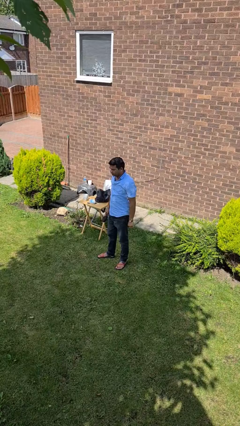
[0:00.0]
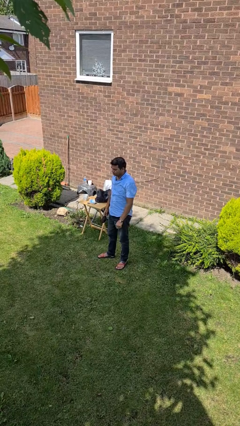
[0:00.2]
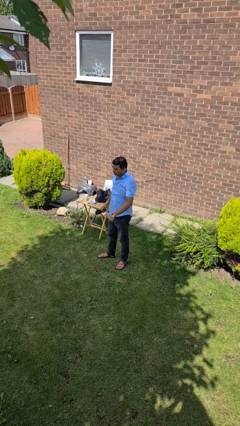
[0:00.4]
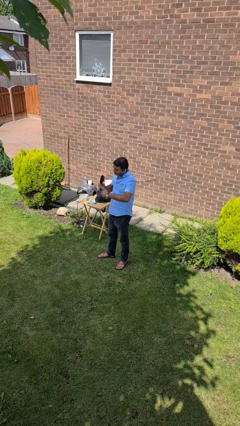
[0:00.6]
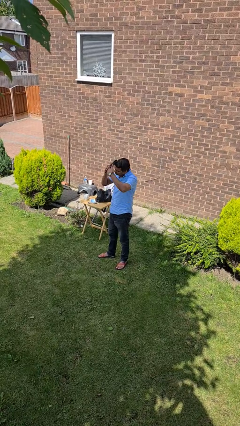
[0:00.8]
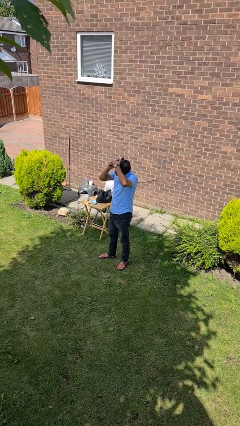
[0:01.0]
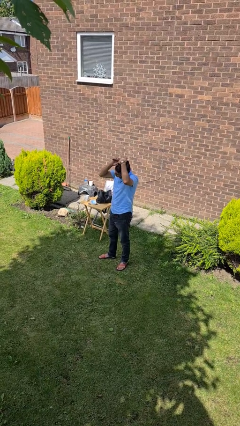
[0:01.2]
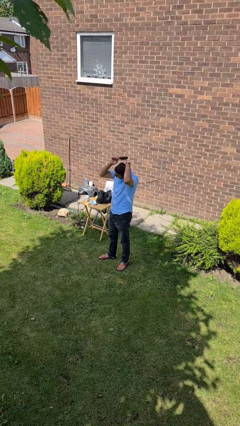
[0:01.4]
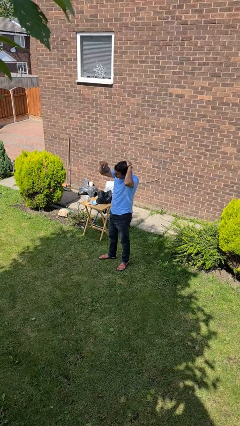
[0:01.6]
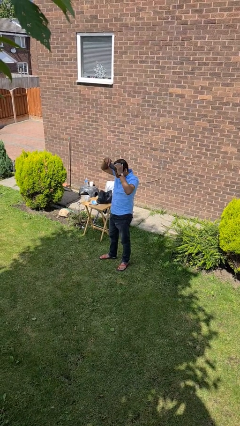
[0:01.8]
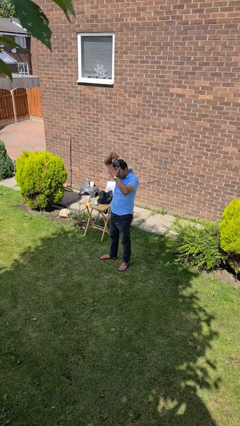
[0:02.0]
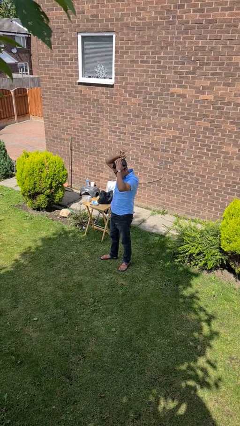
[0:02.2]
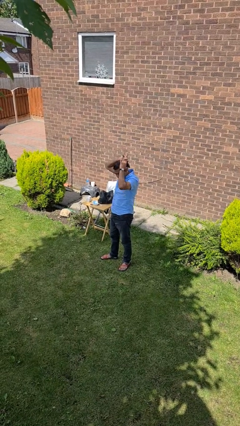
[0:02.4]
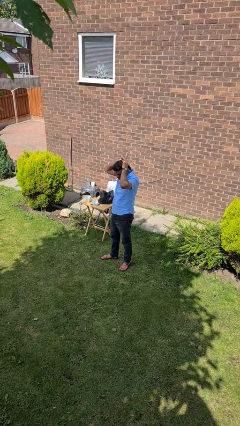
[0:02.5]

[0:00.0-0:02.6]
person brushes hair

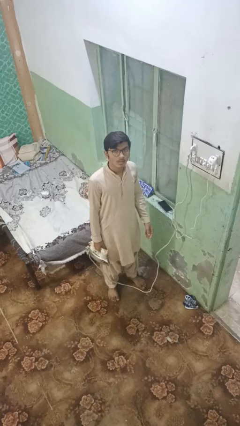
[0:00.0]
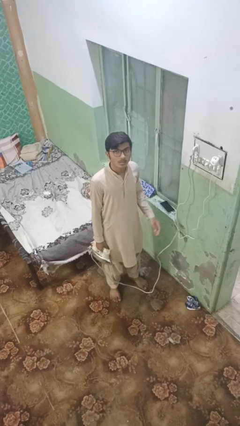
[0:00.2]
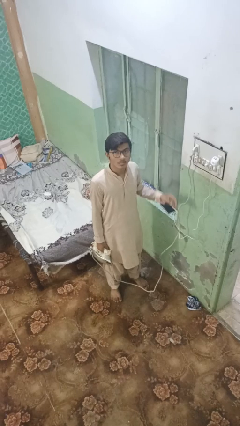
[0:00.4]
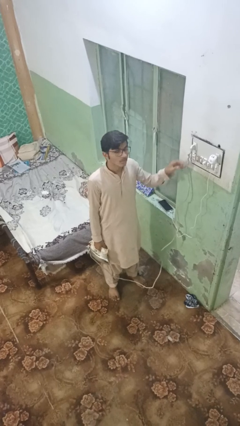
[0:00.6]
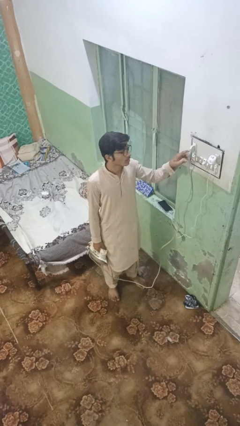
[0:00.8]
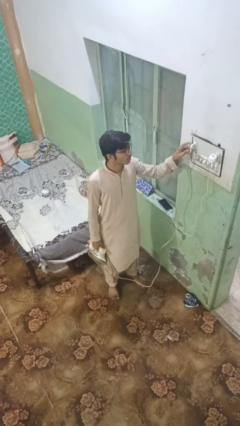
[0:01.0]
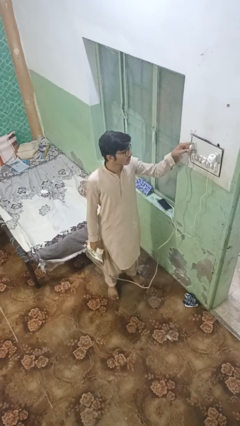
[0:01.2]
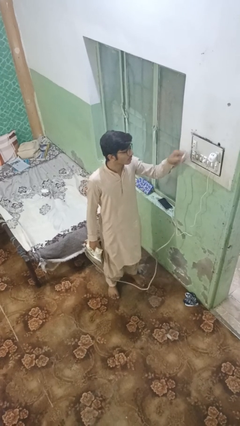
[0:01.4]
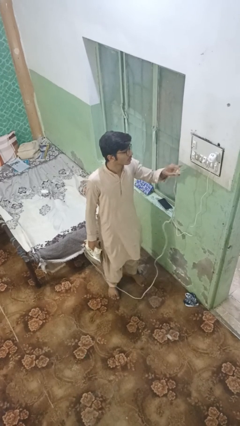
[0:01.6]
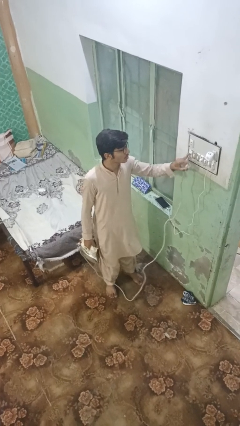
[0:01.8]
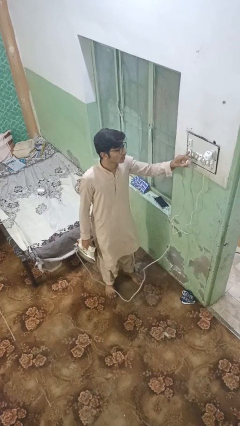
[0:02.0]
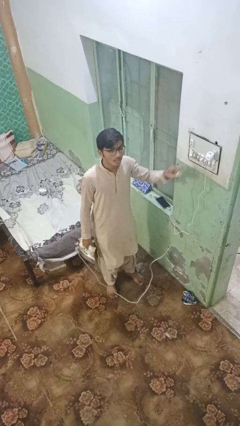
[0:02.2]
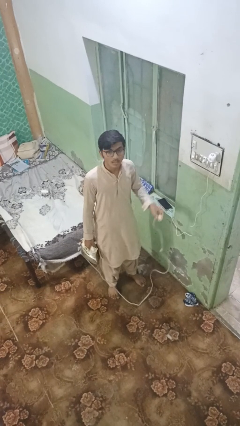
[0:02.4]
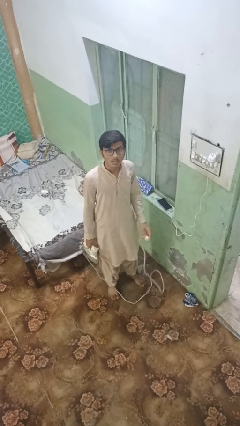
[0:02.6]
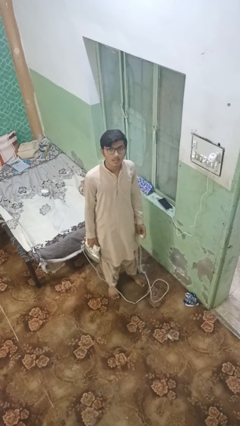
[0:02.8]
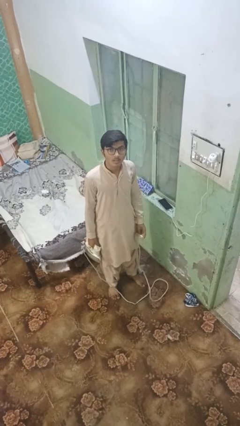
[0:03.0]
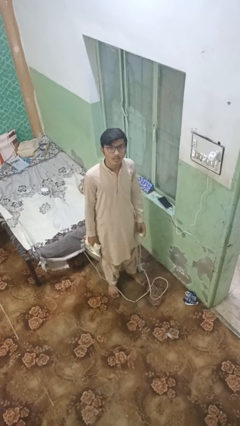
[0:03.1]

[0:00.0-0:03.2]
person unplugs from electrical socket

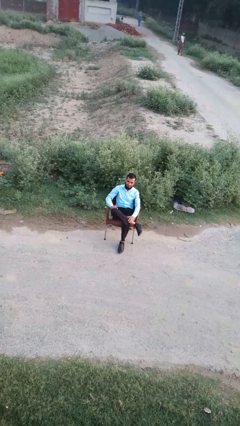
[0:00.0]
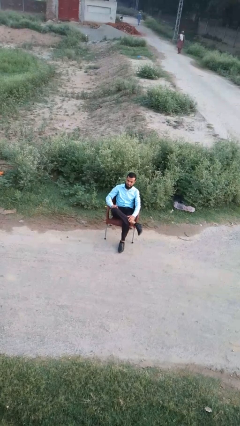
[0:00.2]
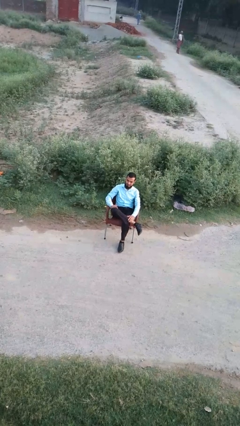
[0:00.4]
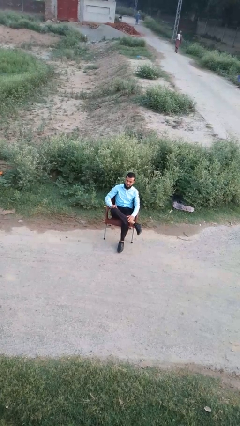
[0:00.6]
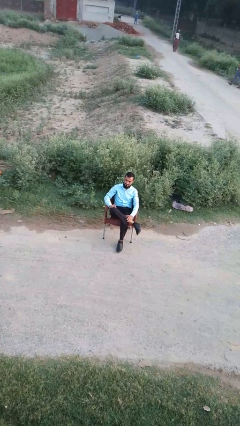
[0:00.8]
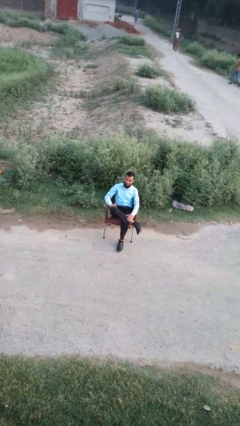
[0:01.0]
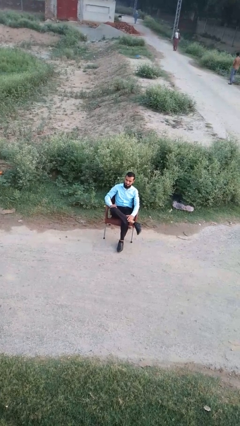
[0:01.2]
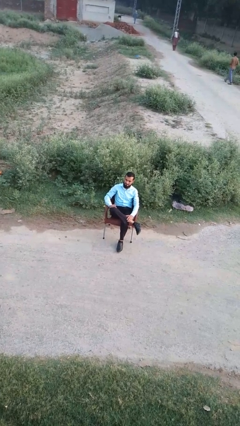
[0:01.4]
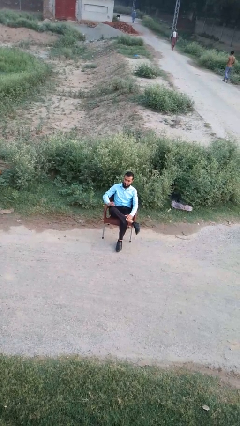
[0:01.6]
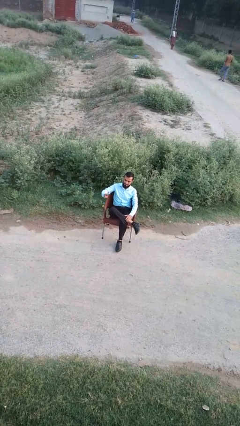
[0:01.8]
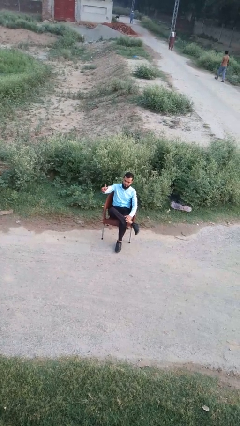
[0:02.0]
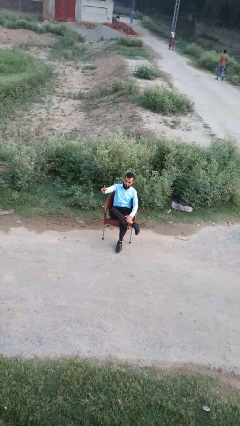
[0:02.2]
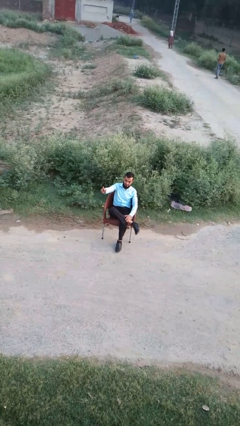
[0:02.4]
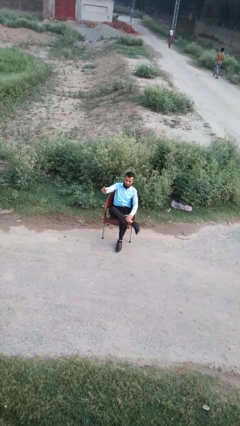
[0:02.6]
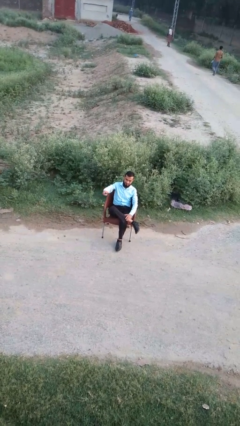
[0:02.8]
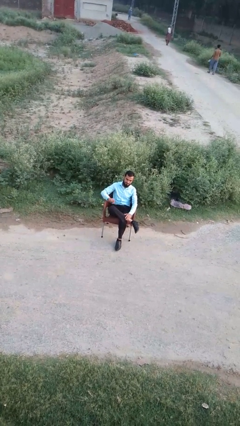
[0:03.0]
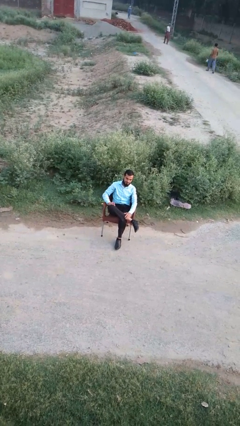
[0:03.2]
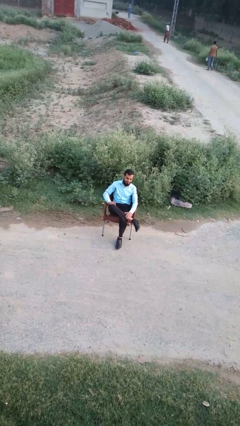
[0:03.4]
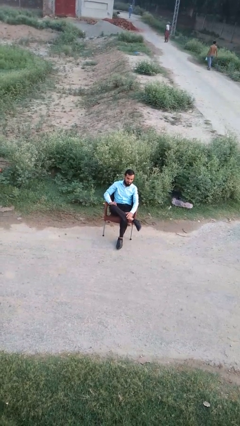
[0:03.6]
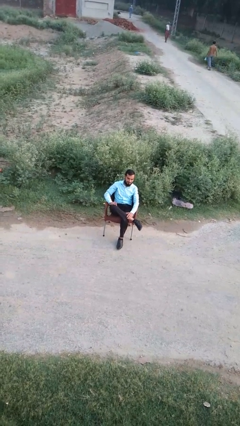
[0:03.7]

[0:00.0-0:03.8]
person gestures peace

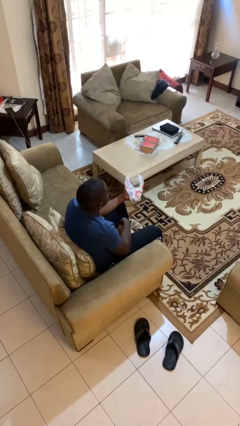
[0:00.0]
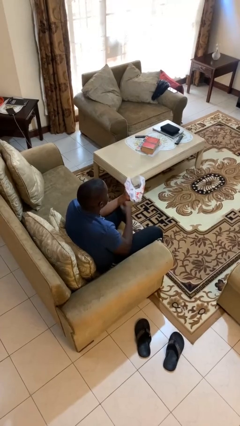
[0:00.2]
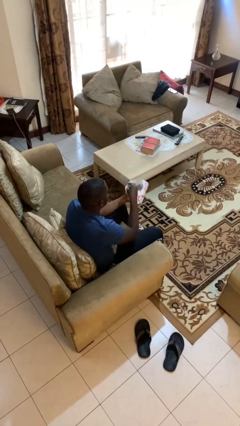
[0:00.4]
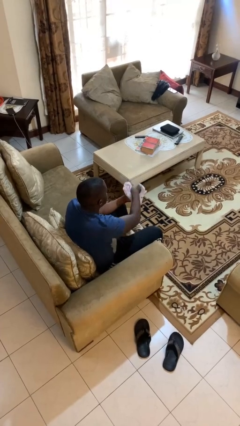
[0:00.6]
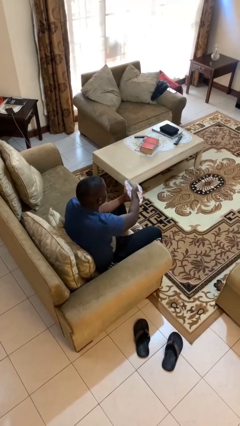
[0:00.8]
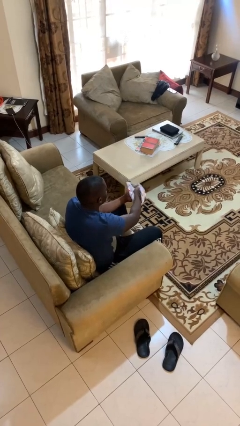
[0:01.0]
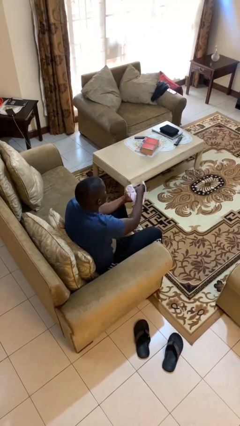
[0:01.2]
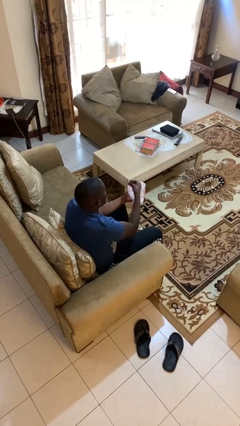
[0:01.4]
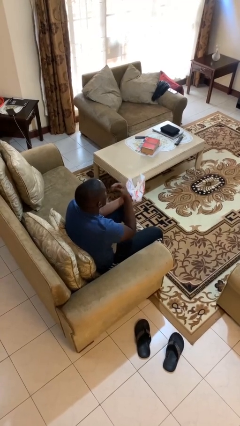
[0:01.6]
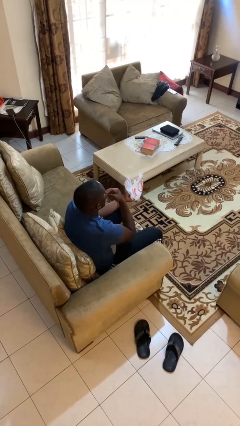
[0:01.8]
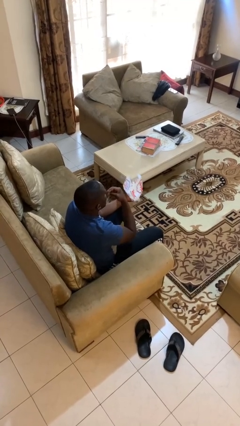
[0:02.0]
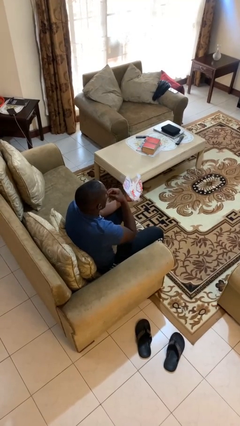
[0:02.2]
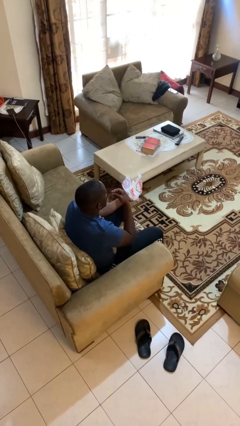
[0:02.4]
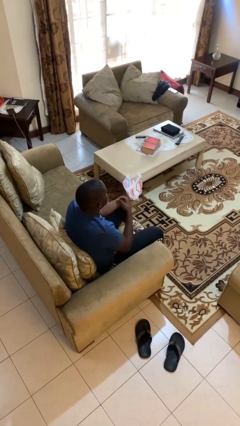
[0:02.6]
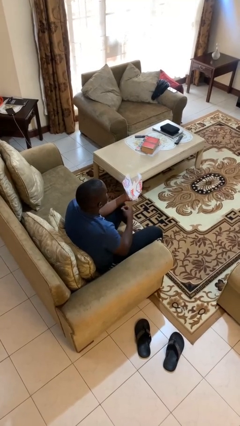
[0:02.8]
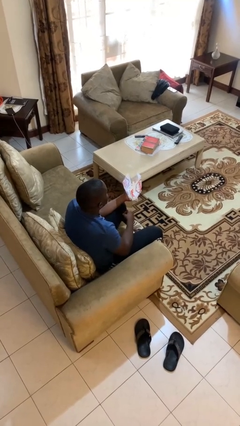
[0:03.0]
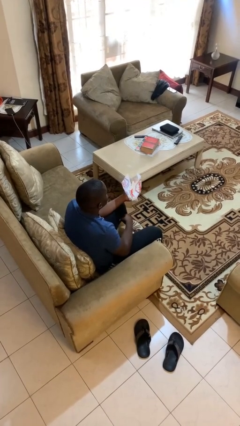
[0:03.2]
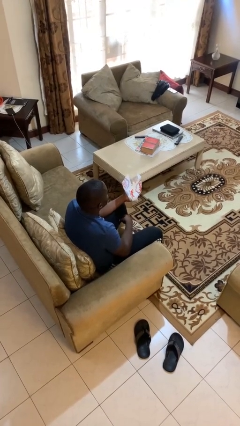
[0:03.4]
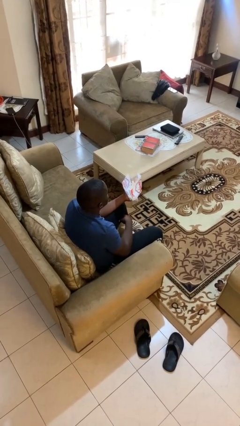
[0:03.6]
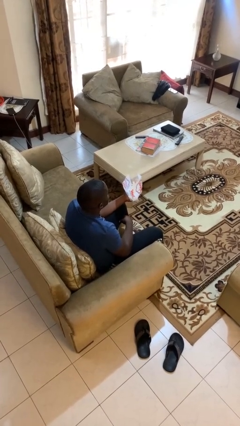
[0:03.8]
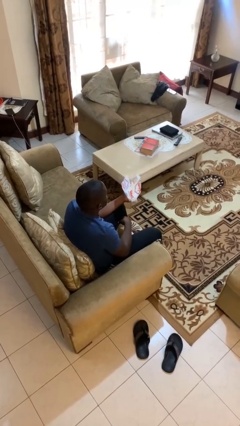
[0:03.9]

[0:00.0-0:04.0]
person eats snack from bag

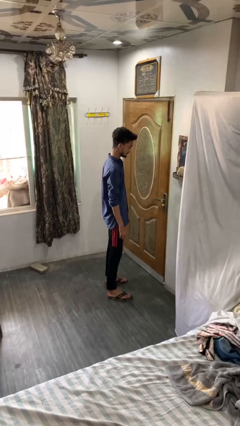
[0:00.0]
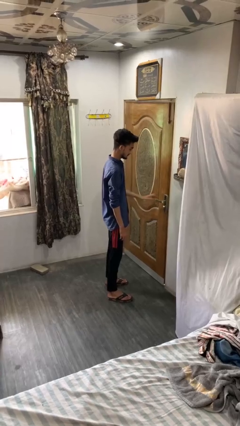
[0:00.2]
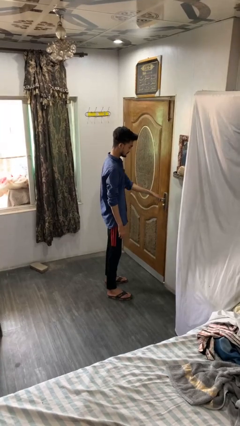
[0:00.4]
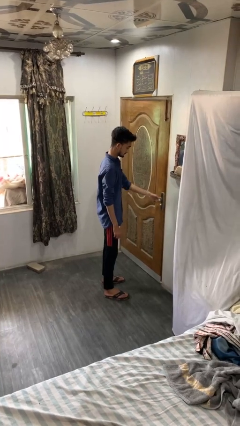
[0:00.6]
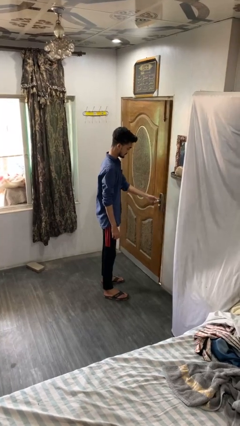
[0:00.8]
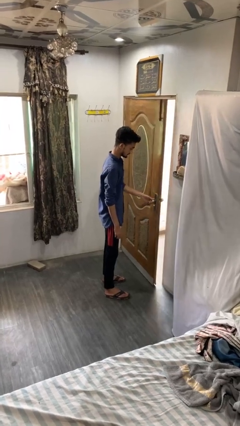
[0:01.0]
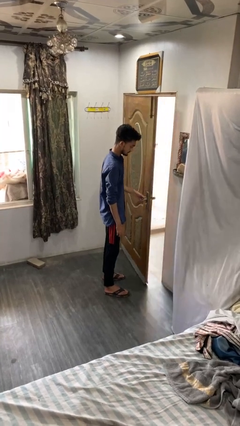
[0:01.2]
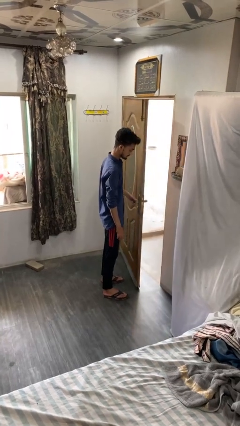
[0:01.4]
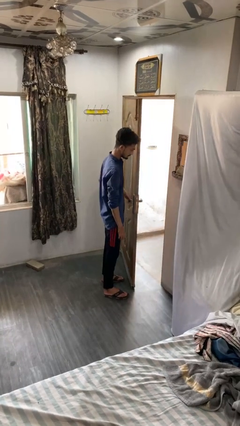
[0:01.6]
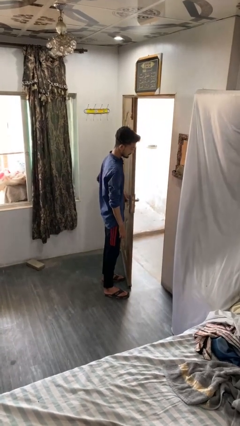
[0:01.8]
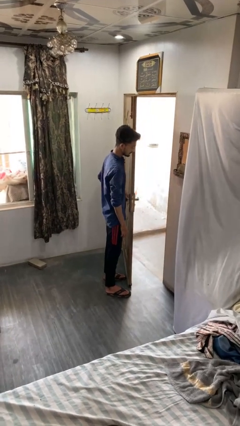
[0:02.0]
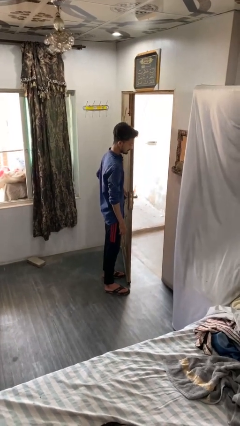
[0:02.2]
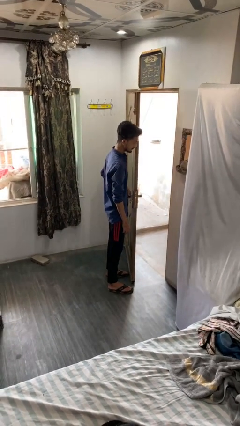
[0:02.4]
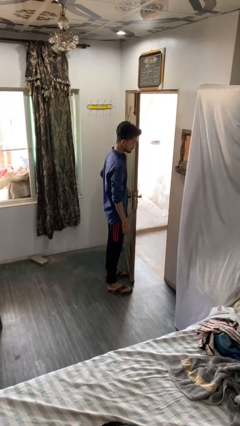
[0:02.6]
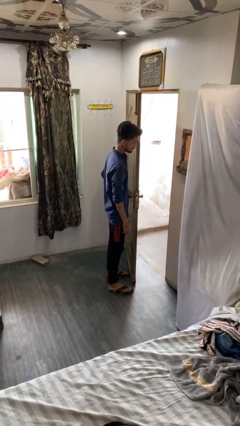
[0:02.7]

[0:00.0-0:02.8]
person opens facility door

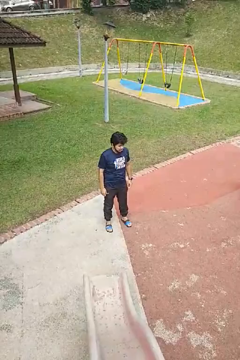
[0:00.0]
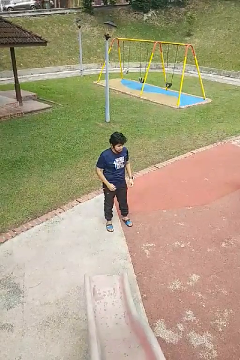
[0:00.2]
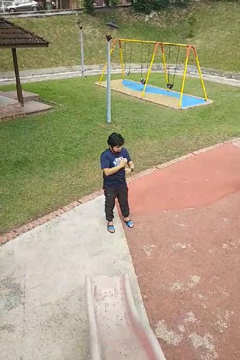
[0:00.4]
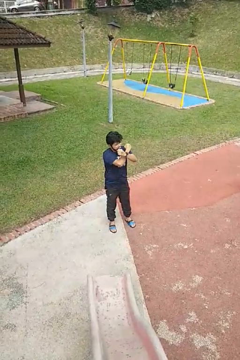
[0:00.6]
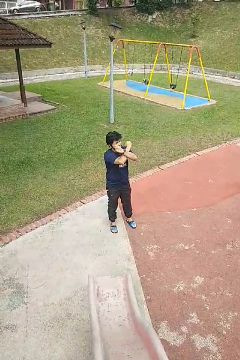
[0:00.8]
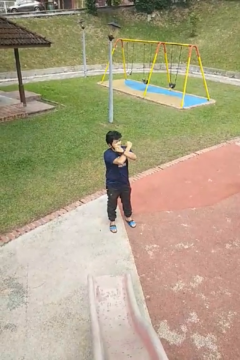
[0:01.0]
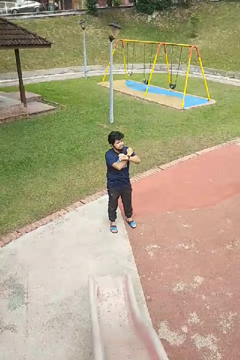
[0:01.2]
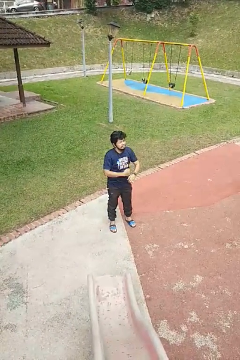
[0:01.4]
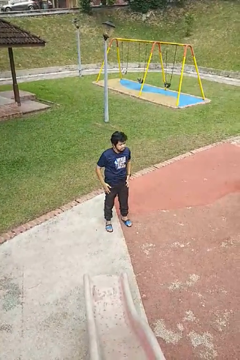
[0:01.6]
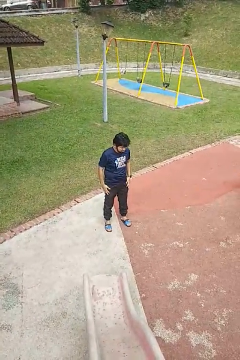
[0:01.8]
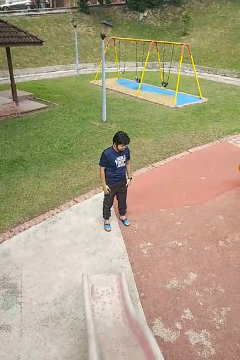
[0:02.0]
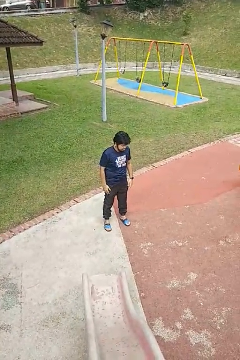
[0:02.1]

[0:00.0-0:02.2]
person gestures arms x
